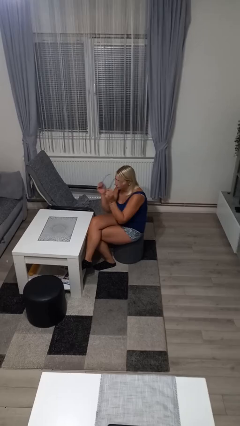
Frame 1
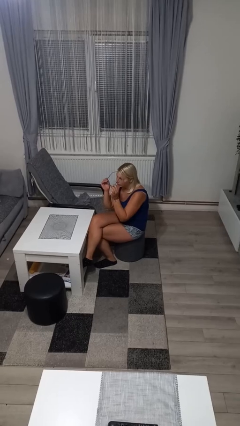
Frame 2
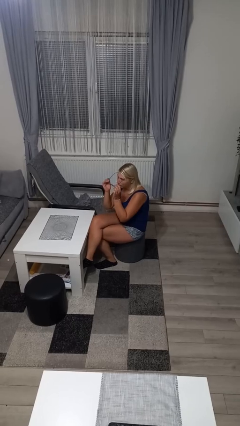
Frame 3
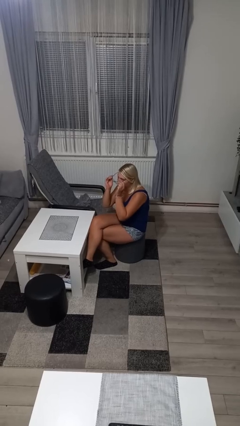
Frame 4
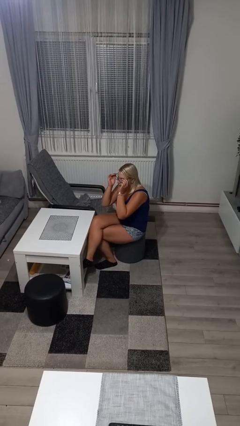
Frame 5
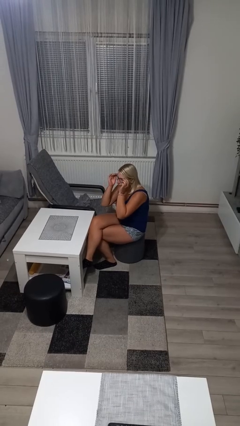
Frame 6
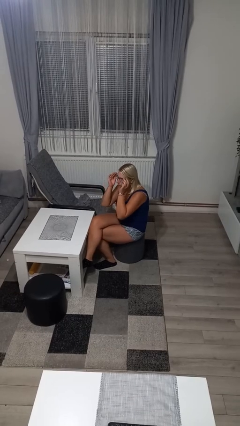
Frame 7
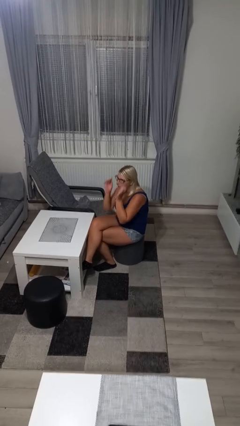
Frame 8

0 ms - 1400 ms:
person puts on glasses

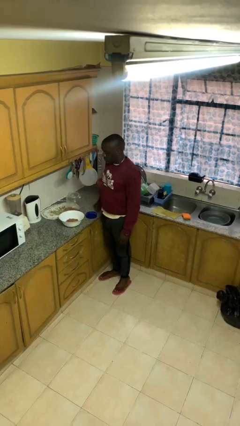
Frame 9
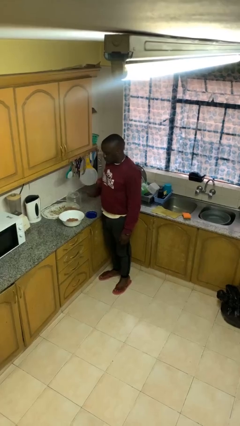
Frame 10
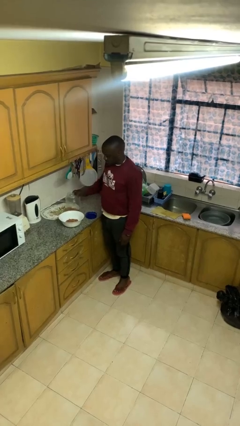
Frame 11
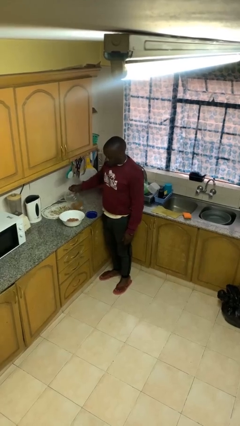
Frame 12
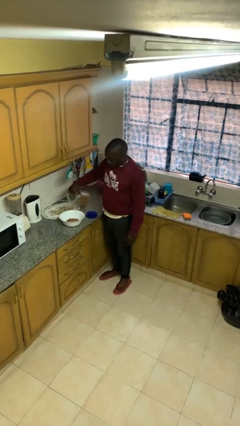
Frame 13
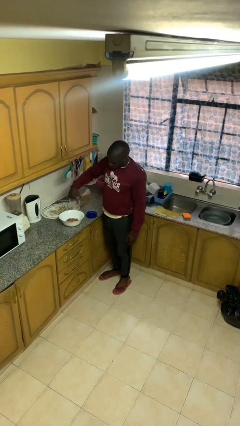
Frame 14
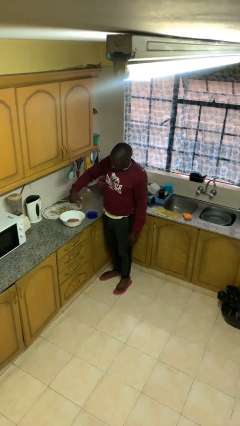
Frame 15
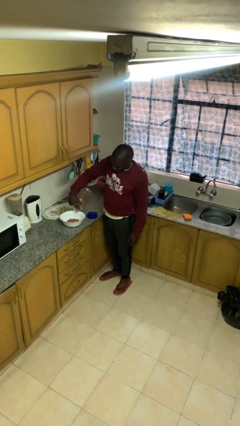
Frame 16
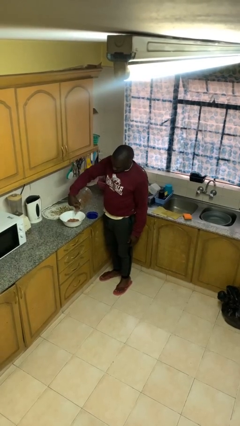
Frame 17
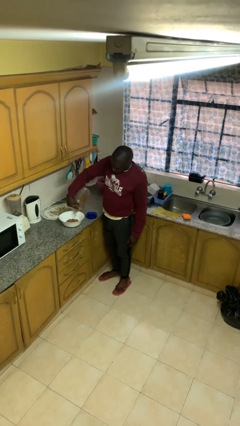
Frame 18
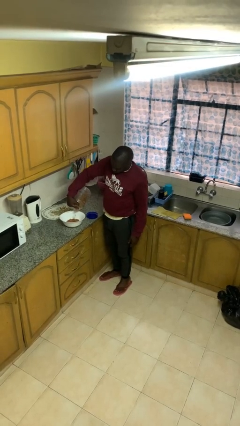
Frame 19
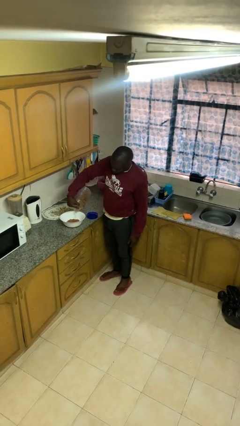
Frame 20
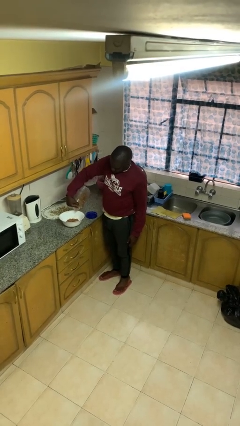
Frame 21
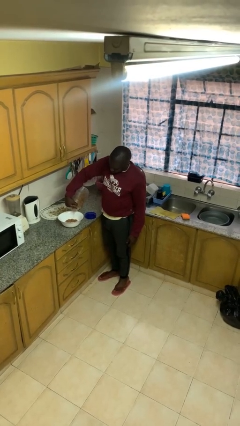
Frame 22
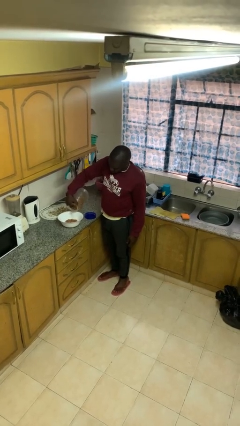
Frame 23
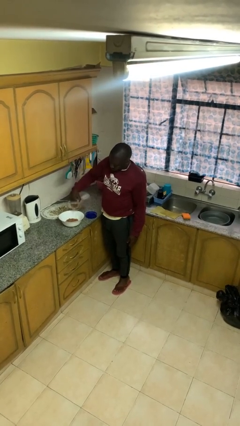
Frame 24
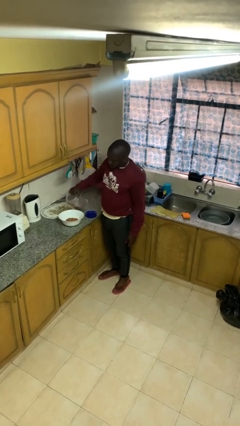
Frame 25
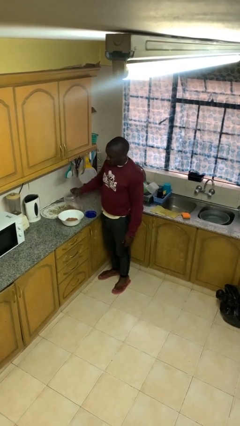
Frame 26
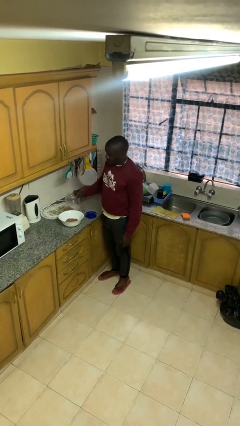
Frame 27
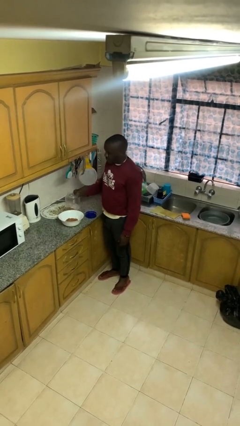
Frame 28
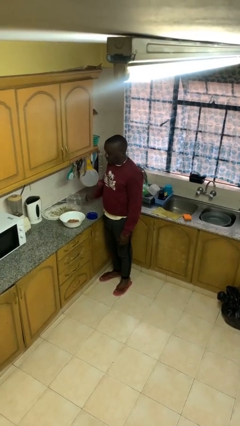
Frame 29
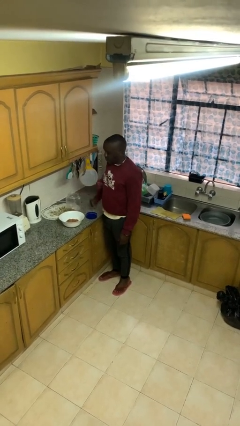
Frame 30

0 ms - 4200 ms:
person pours into bowl

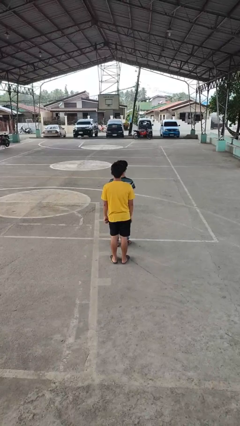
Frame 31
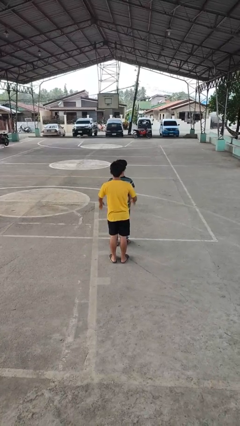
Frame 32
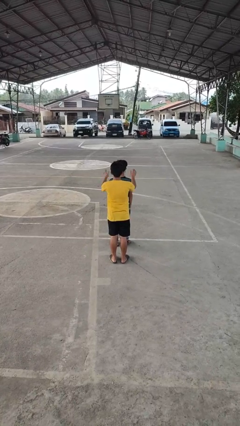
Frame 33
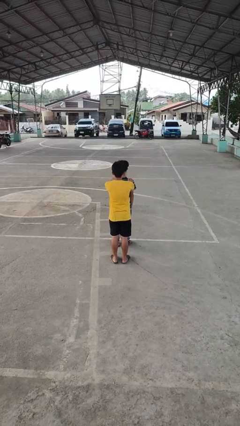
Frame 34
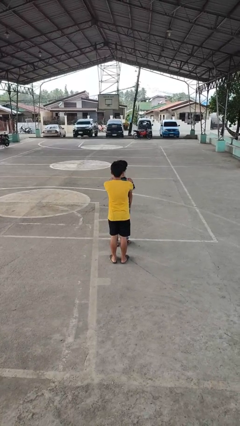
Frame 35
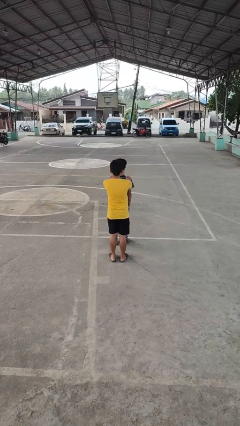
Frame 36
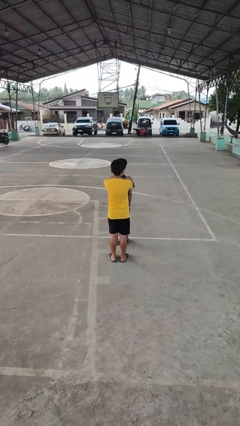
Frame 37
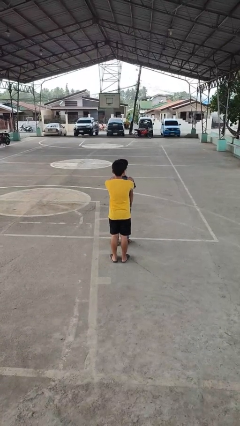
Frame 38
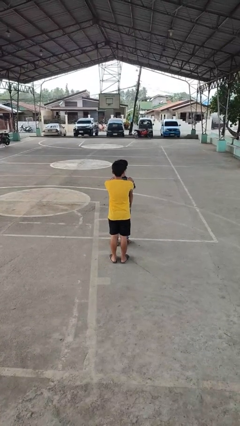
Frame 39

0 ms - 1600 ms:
person grabs person by shoulder

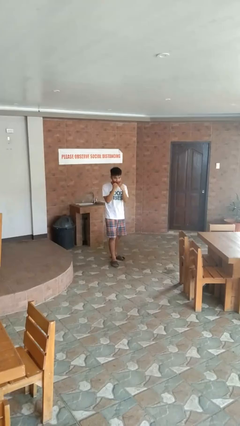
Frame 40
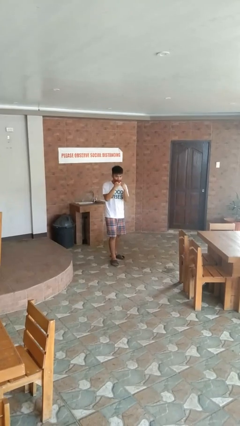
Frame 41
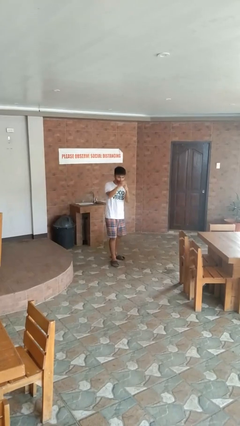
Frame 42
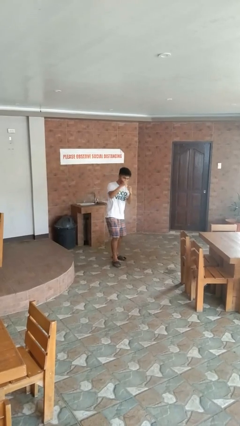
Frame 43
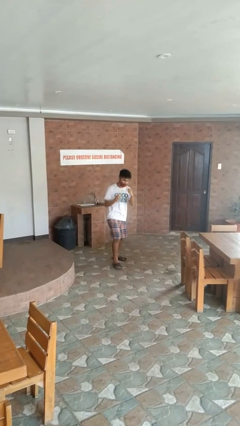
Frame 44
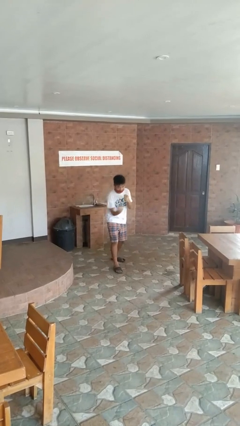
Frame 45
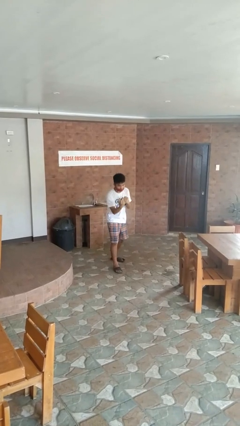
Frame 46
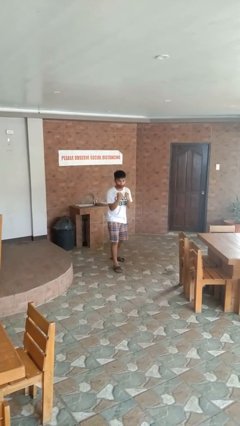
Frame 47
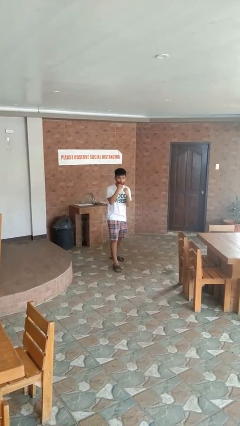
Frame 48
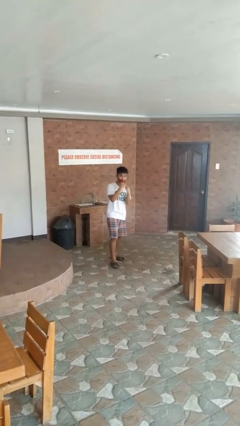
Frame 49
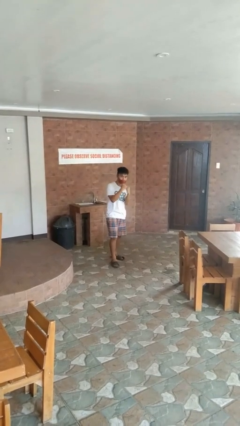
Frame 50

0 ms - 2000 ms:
person punches

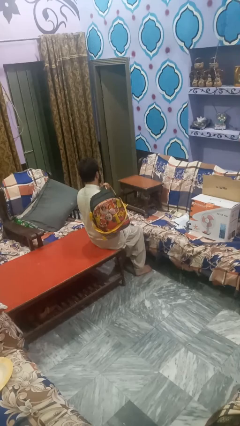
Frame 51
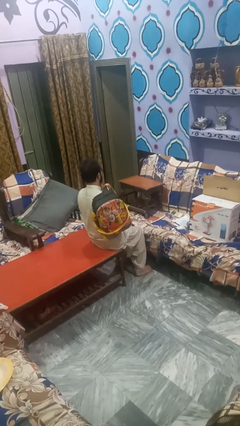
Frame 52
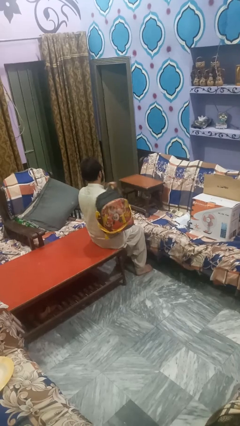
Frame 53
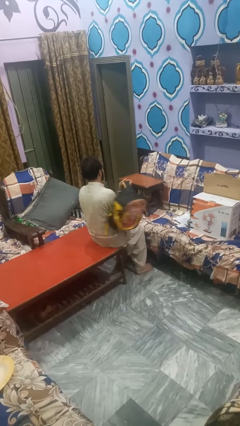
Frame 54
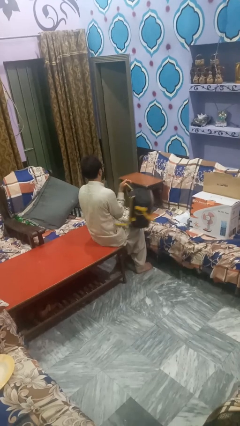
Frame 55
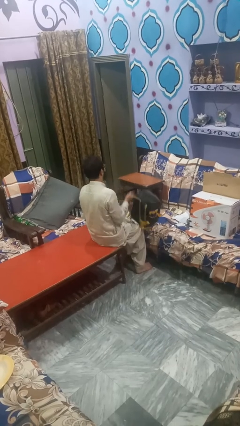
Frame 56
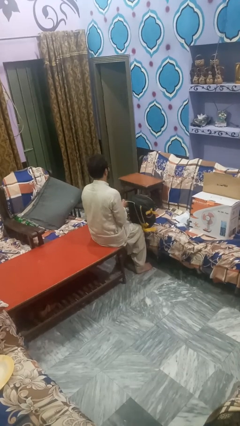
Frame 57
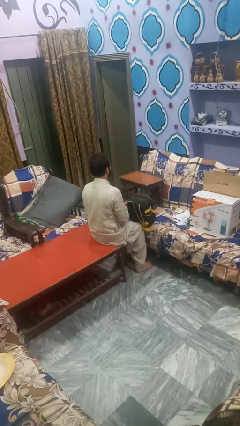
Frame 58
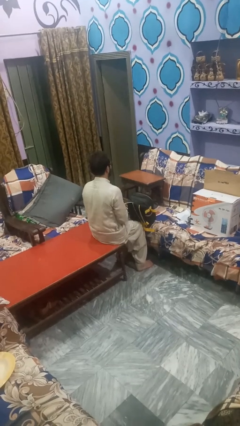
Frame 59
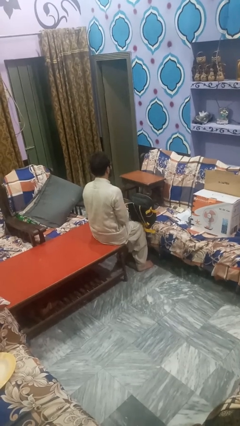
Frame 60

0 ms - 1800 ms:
person takes off backpack

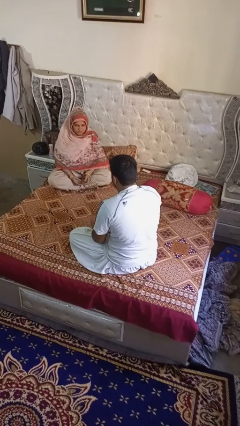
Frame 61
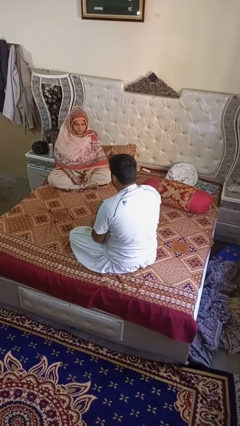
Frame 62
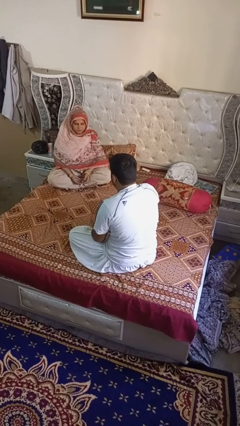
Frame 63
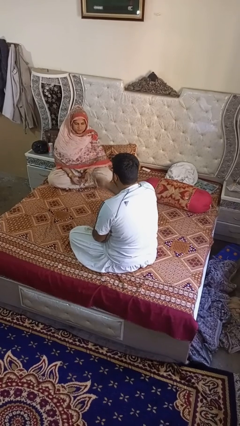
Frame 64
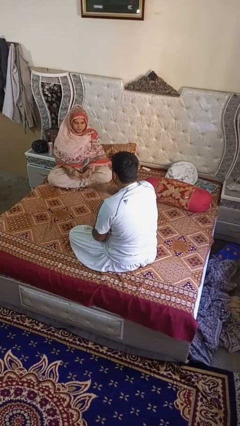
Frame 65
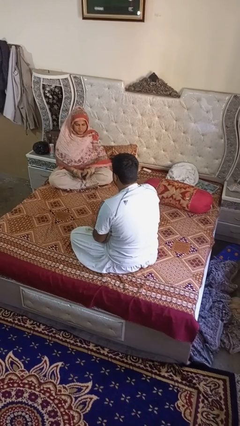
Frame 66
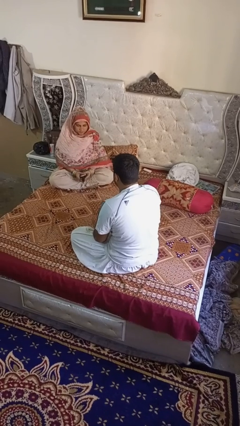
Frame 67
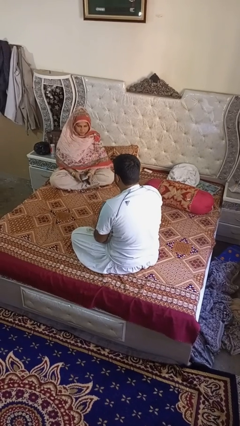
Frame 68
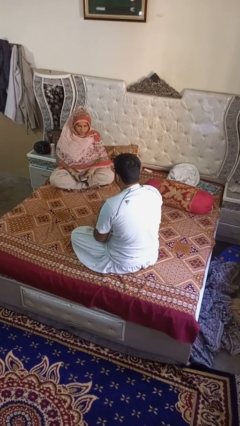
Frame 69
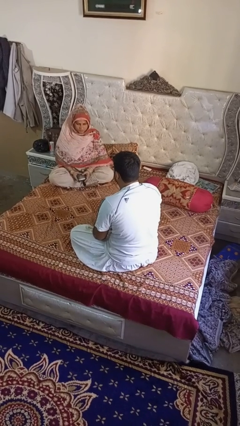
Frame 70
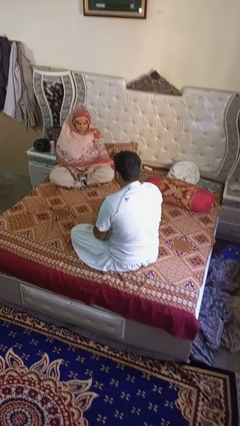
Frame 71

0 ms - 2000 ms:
person throws object to person

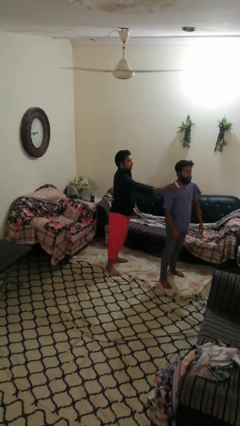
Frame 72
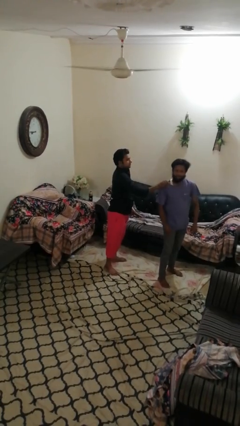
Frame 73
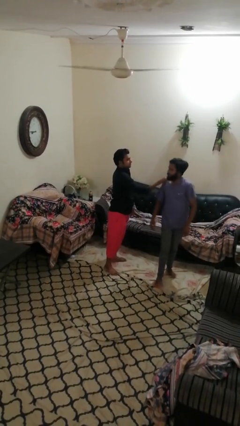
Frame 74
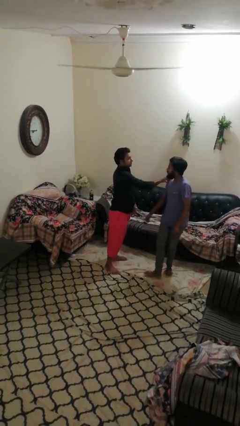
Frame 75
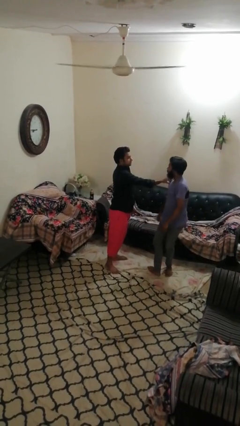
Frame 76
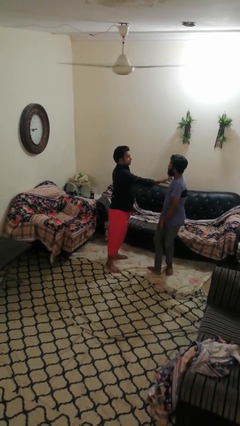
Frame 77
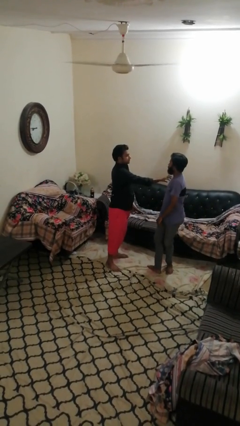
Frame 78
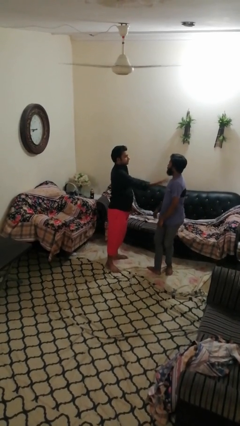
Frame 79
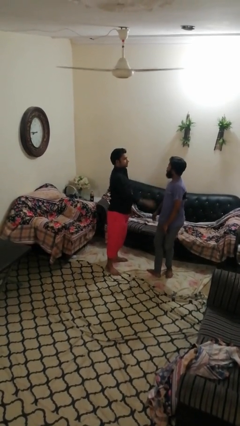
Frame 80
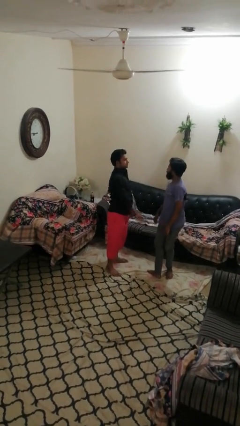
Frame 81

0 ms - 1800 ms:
person spins person around

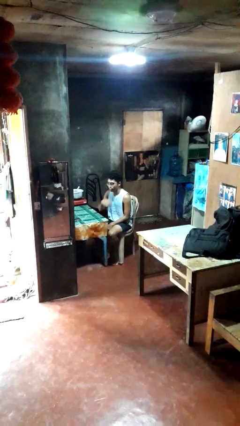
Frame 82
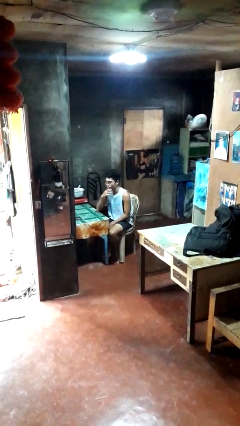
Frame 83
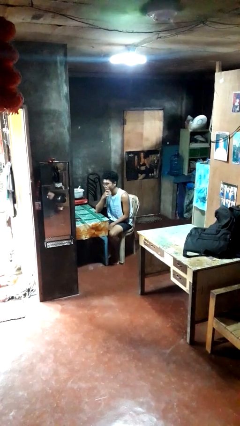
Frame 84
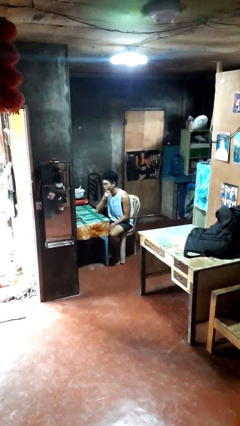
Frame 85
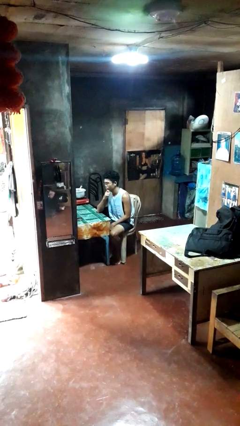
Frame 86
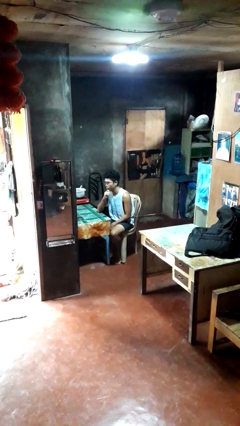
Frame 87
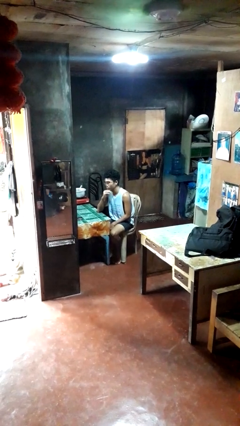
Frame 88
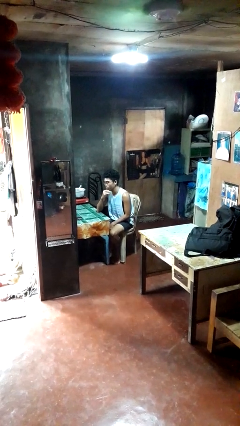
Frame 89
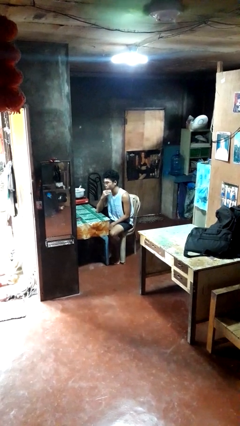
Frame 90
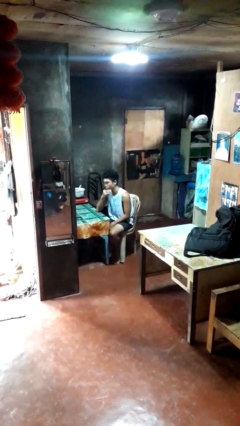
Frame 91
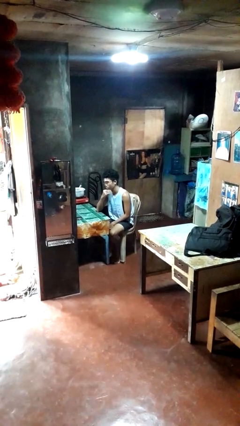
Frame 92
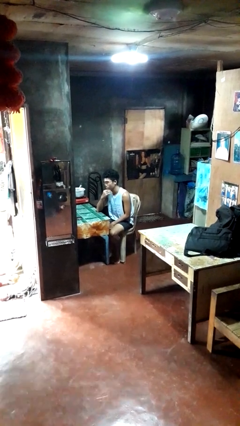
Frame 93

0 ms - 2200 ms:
person strokes chin
